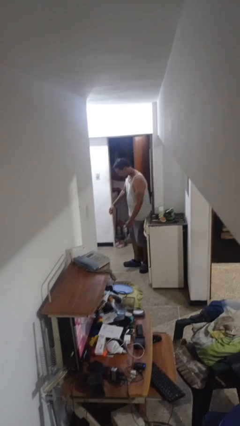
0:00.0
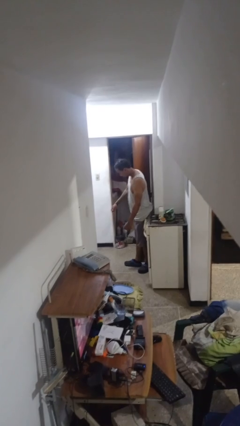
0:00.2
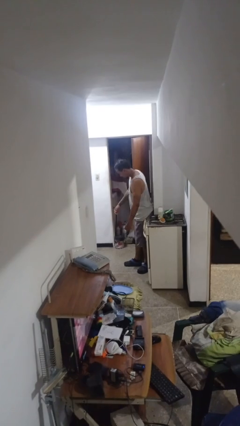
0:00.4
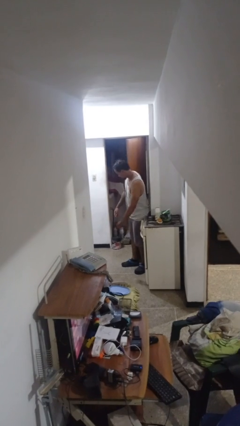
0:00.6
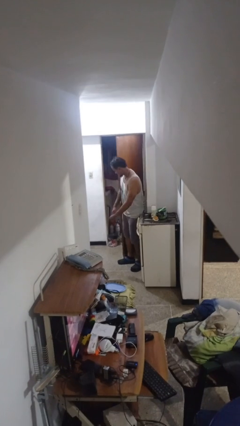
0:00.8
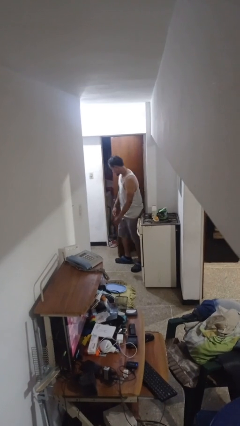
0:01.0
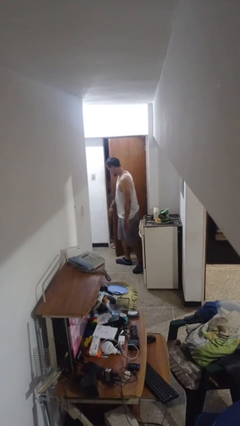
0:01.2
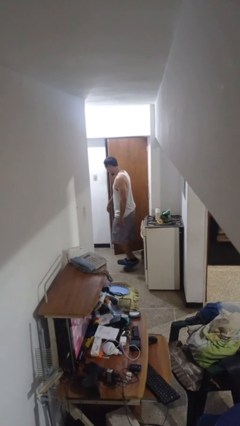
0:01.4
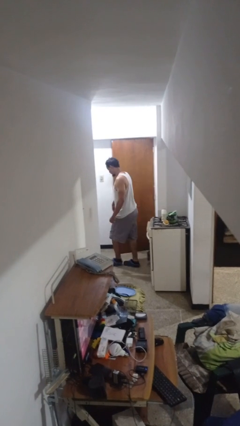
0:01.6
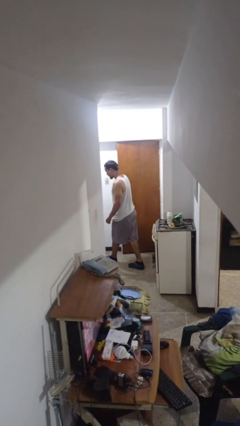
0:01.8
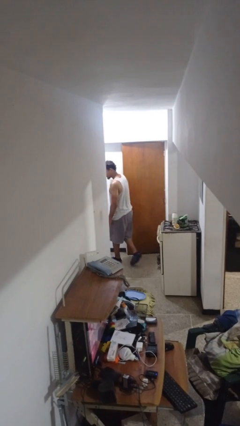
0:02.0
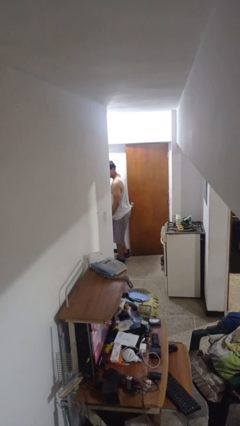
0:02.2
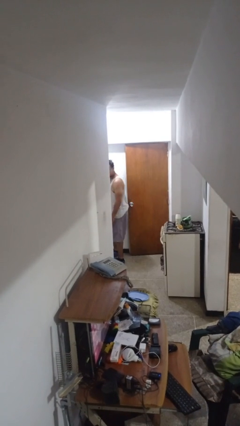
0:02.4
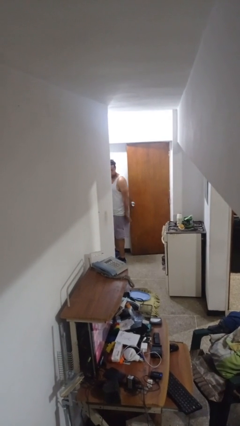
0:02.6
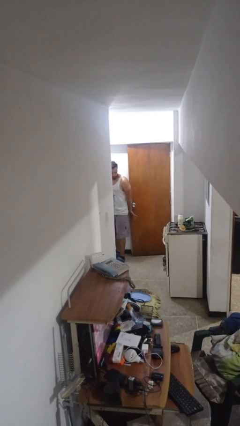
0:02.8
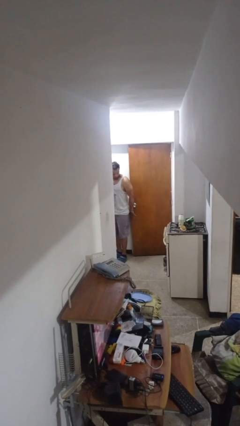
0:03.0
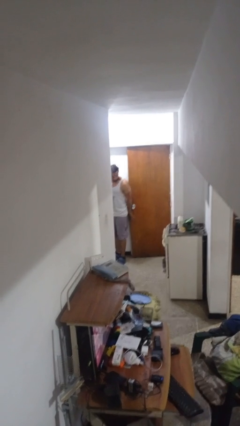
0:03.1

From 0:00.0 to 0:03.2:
person closes door with hip

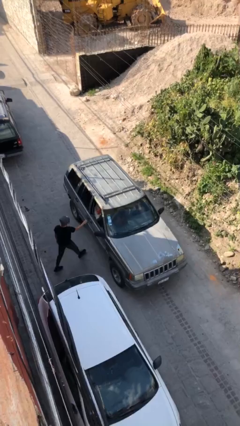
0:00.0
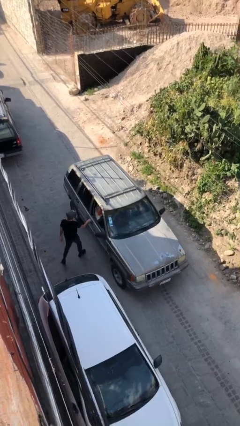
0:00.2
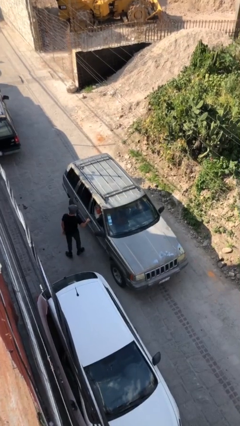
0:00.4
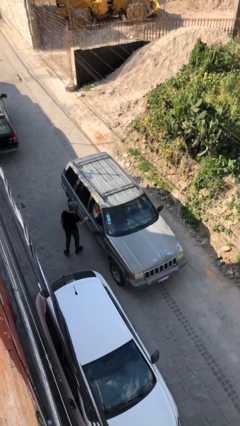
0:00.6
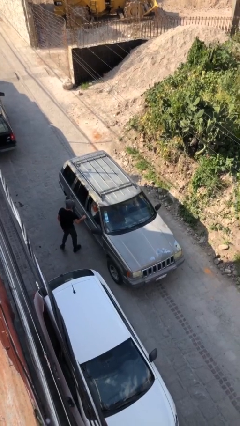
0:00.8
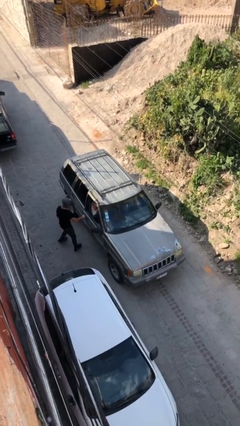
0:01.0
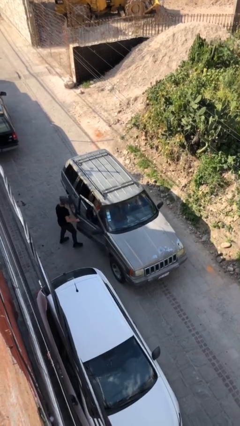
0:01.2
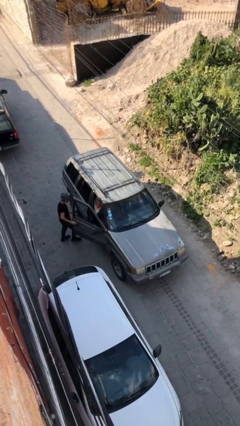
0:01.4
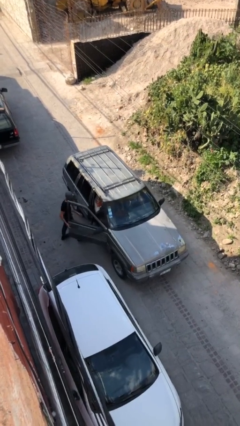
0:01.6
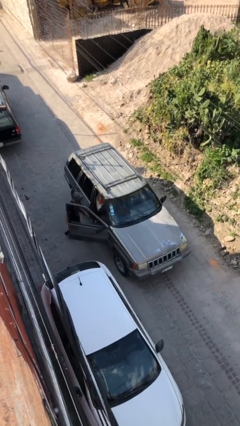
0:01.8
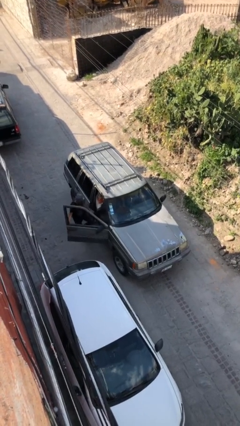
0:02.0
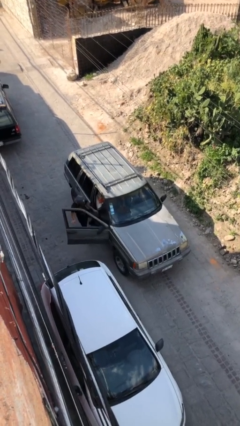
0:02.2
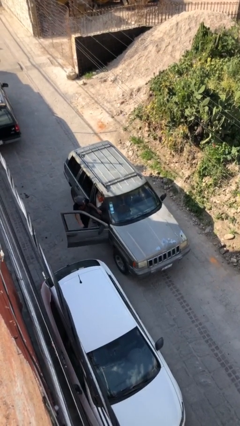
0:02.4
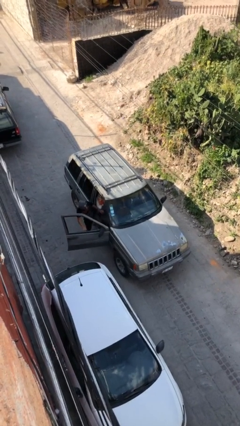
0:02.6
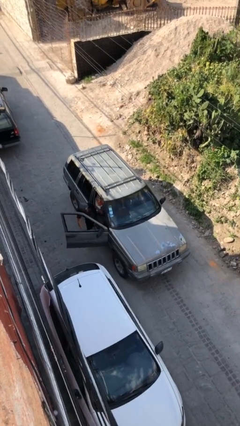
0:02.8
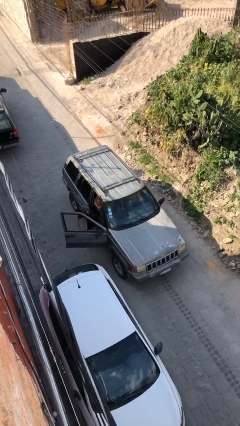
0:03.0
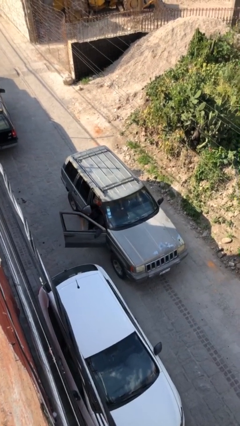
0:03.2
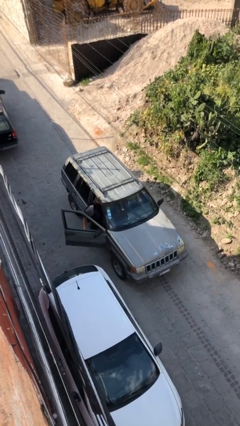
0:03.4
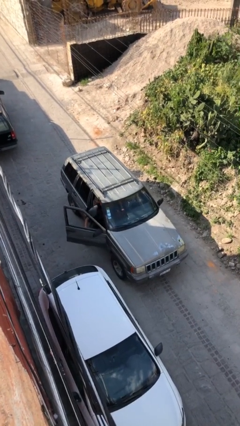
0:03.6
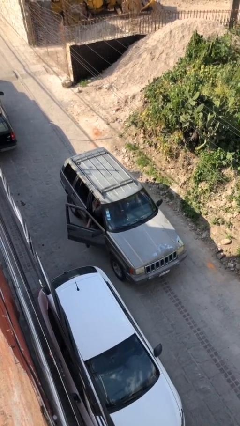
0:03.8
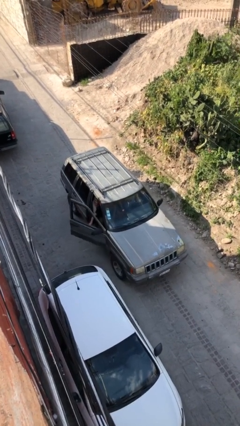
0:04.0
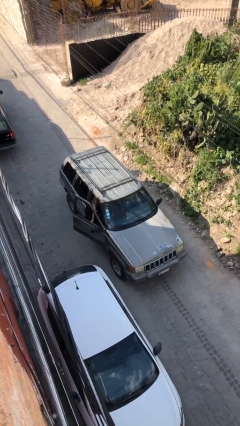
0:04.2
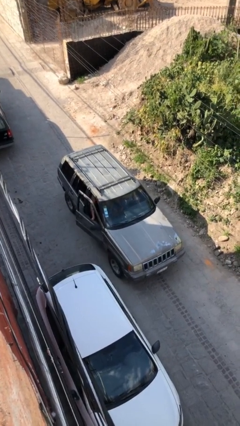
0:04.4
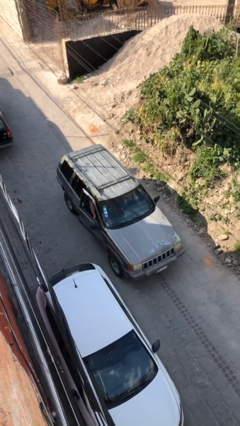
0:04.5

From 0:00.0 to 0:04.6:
car picks up person

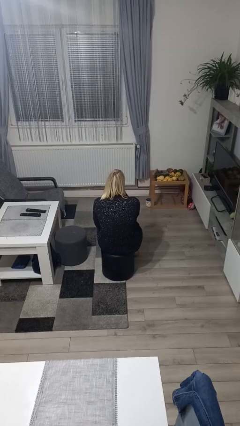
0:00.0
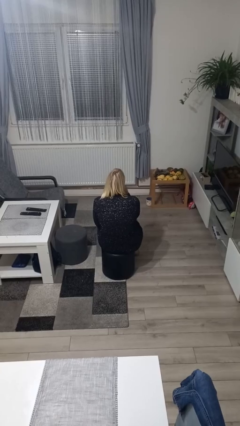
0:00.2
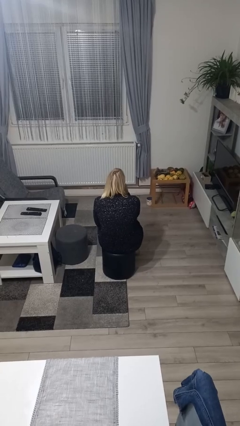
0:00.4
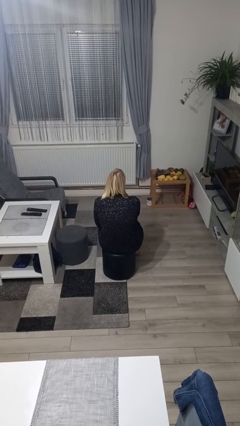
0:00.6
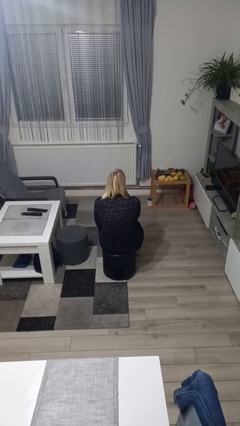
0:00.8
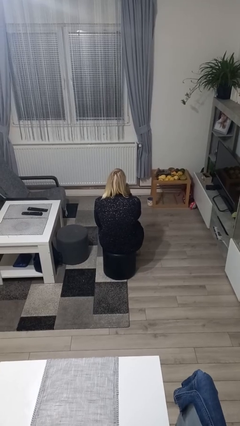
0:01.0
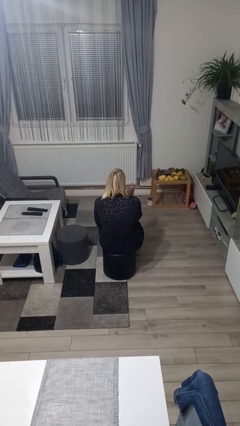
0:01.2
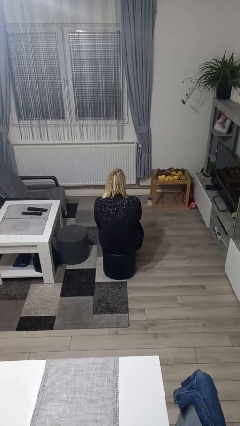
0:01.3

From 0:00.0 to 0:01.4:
person strokes chin

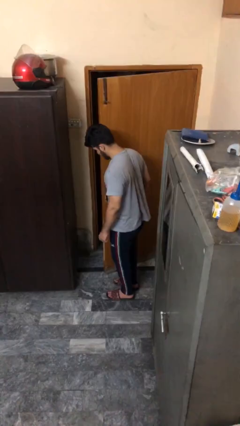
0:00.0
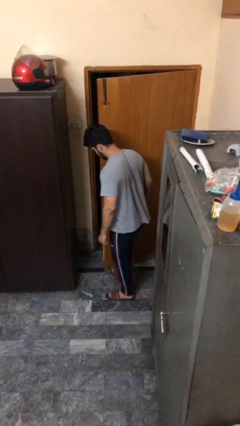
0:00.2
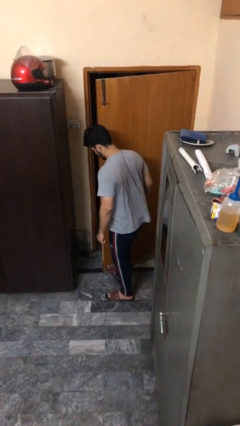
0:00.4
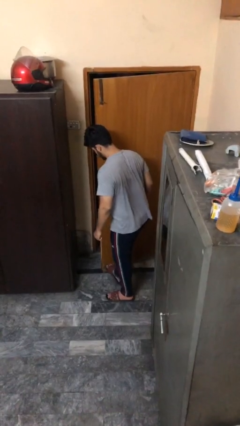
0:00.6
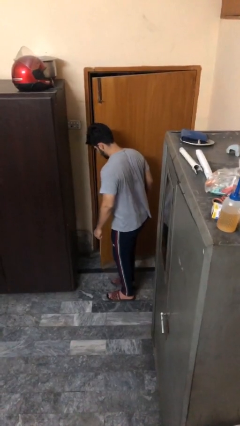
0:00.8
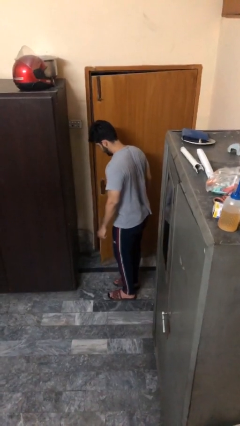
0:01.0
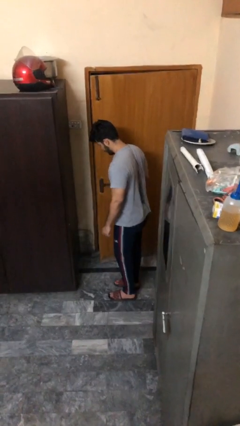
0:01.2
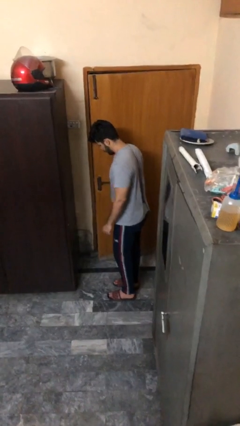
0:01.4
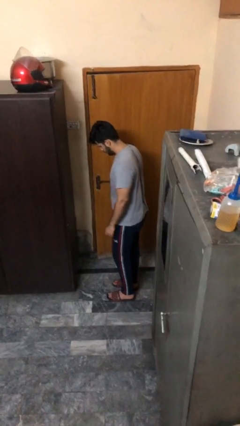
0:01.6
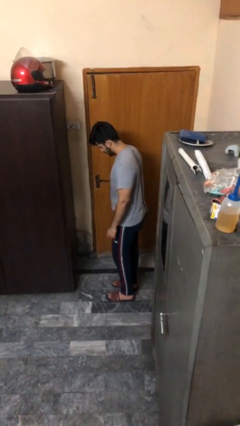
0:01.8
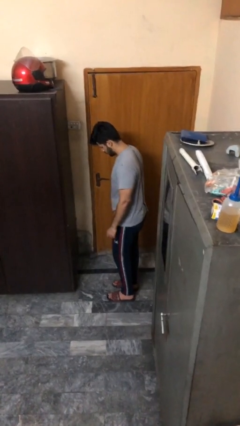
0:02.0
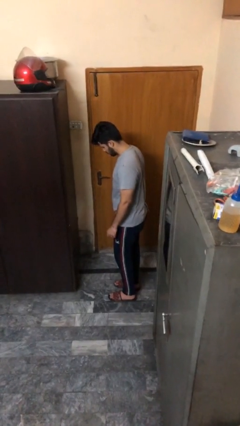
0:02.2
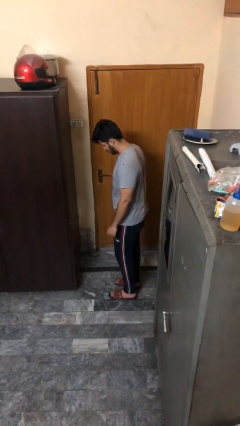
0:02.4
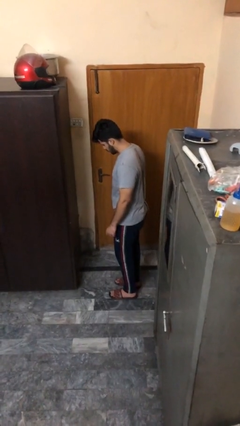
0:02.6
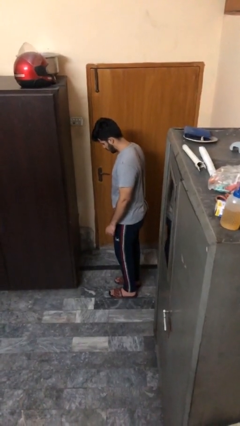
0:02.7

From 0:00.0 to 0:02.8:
person closes door with foot

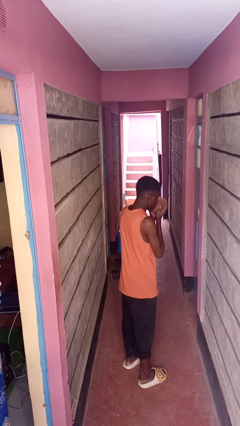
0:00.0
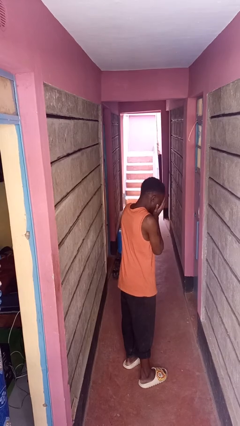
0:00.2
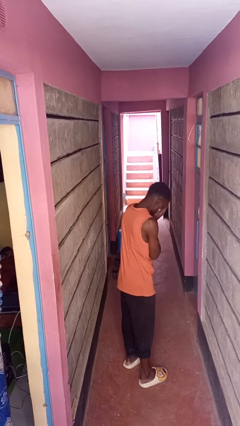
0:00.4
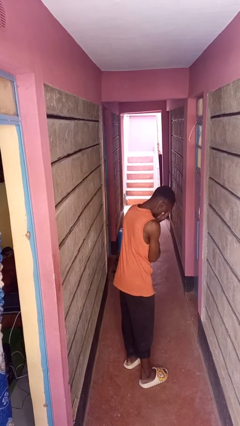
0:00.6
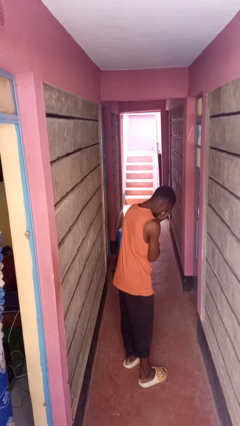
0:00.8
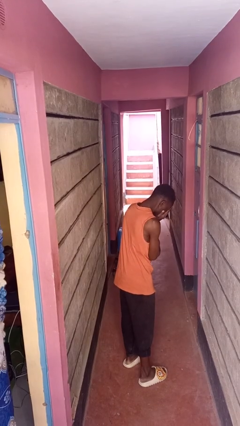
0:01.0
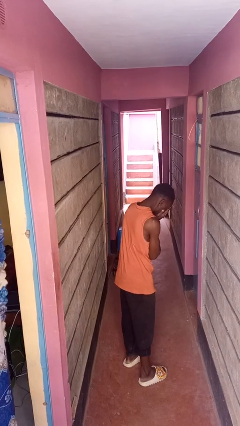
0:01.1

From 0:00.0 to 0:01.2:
person sneezes into hand

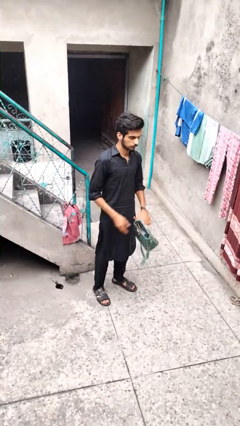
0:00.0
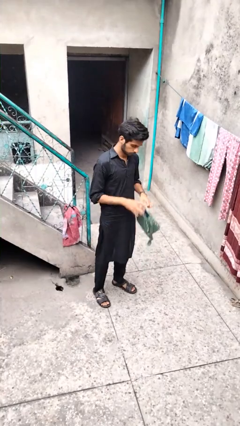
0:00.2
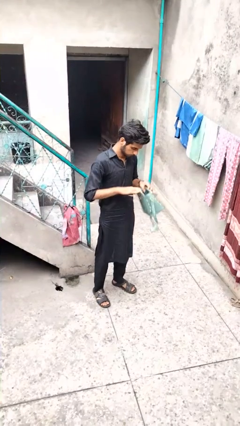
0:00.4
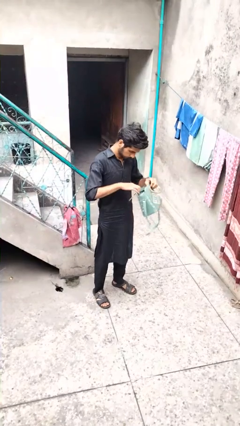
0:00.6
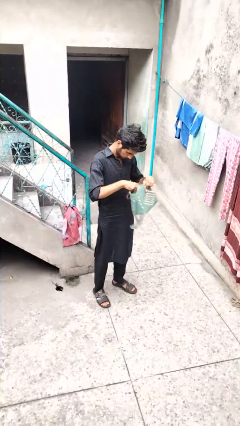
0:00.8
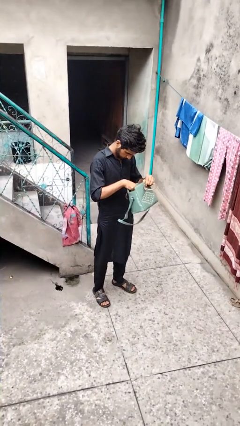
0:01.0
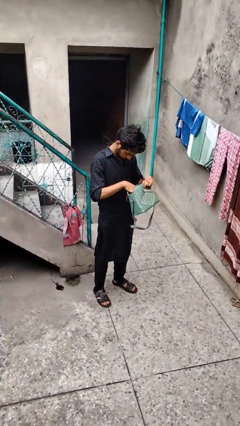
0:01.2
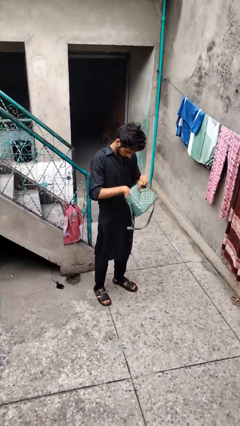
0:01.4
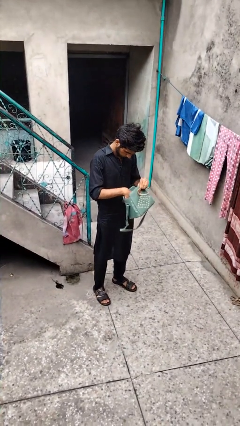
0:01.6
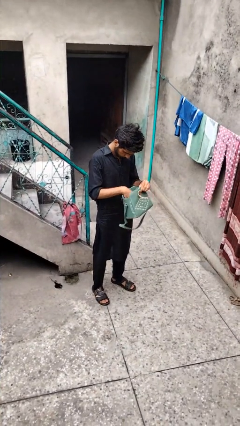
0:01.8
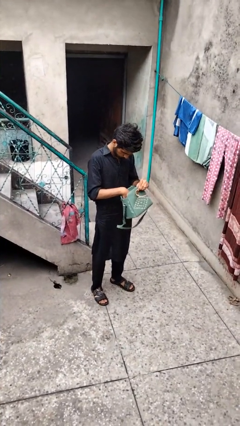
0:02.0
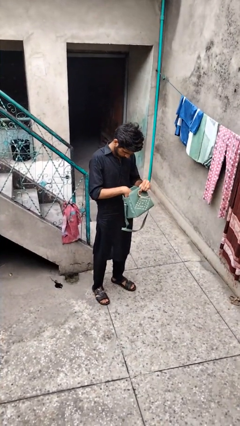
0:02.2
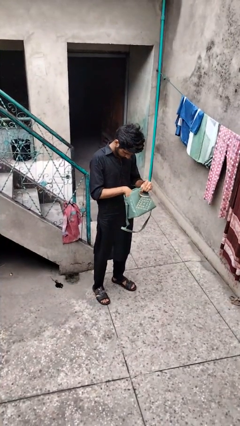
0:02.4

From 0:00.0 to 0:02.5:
person searches in purse

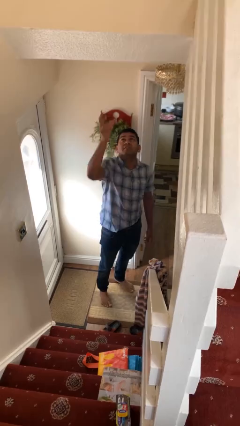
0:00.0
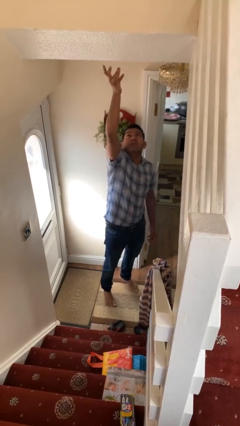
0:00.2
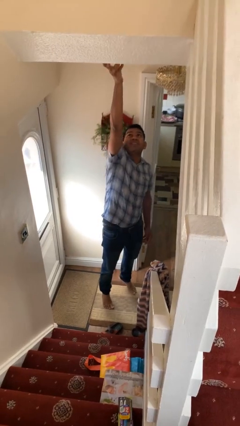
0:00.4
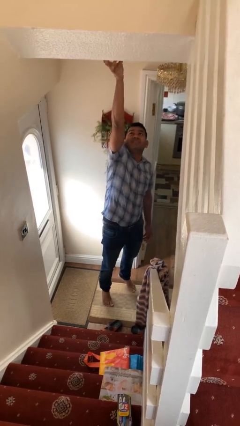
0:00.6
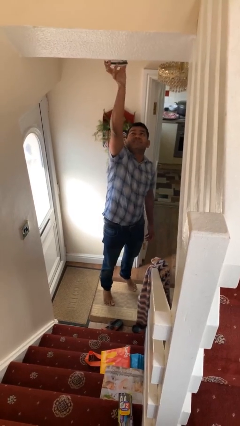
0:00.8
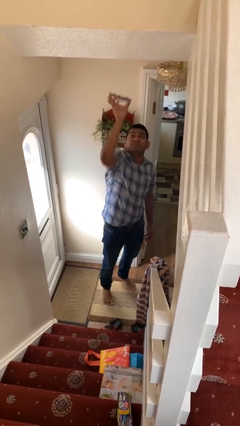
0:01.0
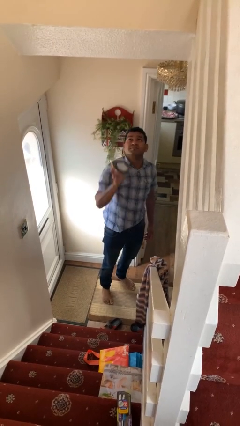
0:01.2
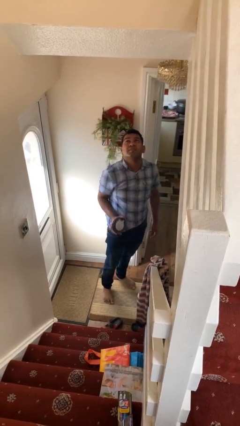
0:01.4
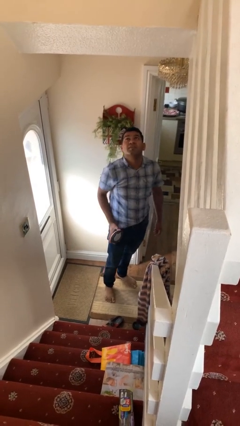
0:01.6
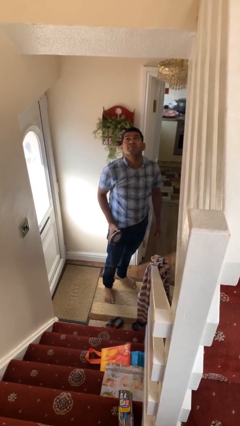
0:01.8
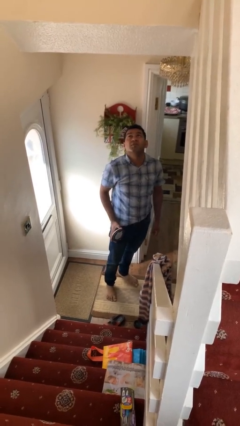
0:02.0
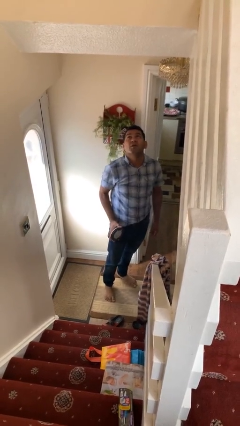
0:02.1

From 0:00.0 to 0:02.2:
person takes down smoke detector
